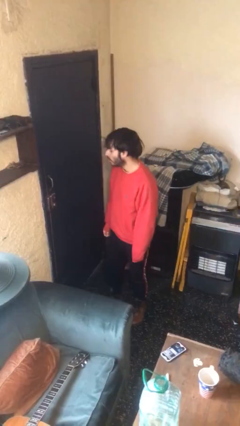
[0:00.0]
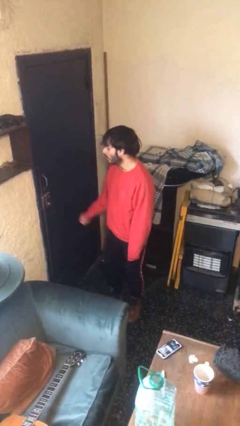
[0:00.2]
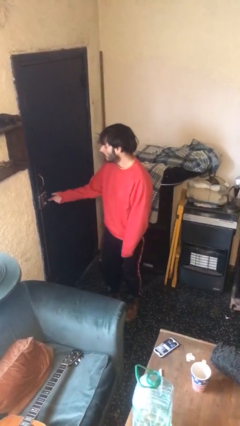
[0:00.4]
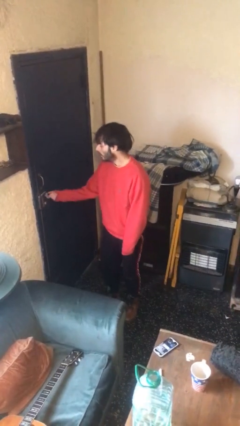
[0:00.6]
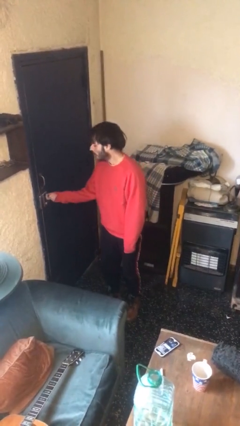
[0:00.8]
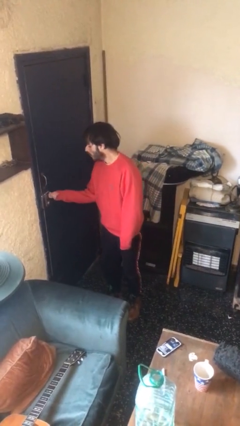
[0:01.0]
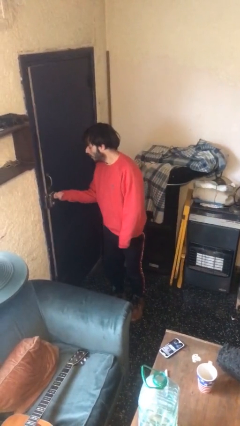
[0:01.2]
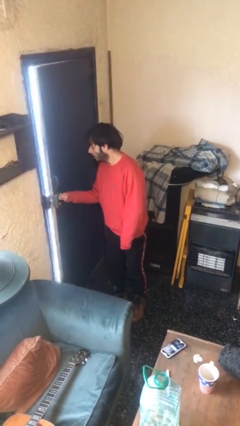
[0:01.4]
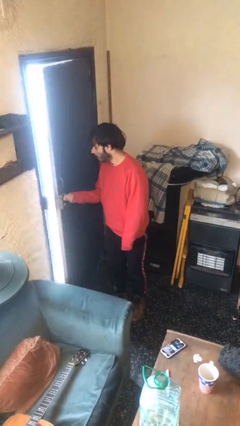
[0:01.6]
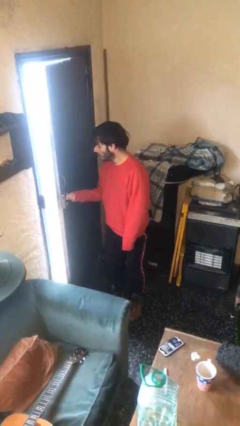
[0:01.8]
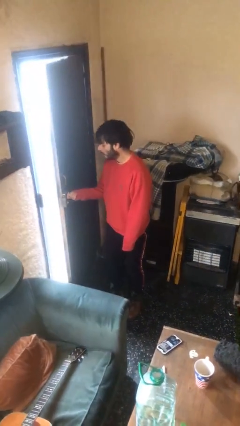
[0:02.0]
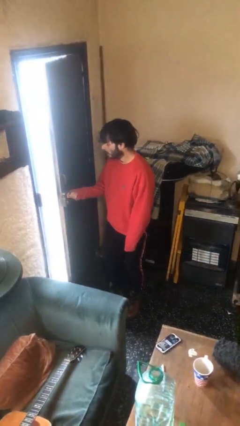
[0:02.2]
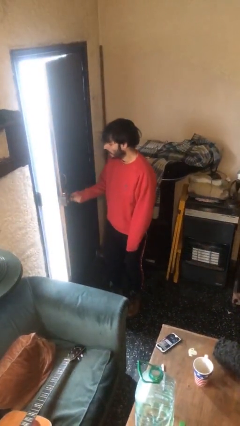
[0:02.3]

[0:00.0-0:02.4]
person opens facility door

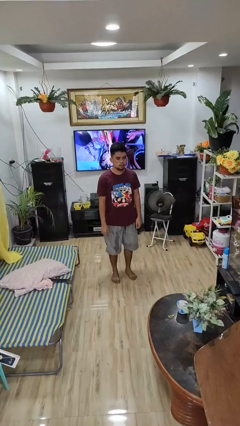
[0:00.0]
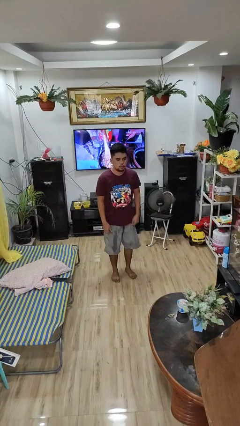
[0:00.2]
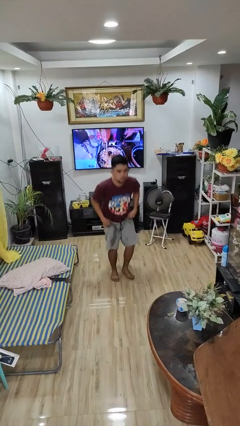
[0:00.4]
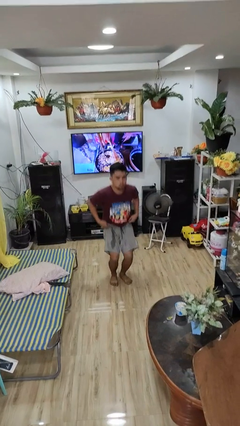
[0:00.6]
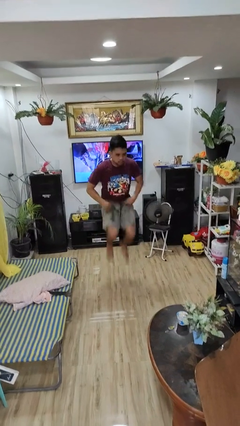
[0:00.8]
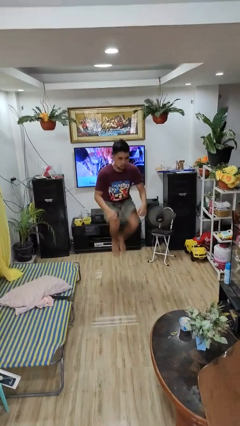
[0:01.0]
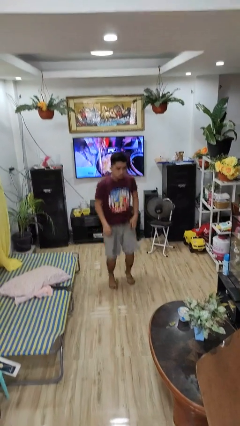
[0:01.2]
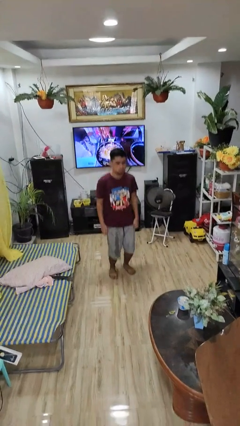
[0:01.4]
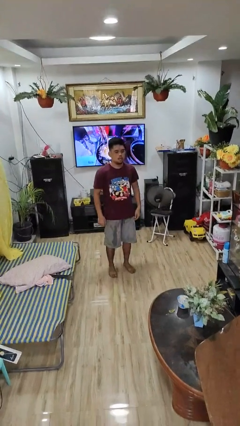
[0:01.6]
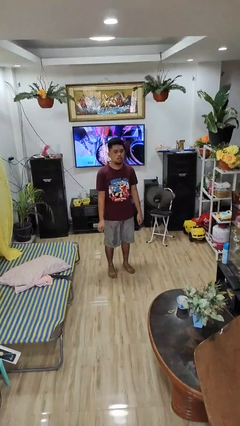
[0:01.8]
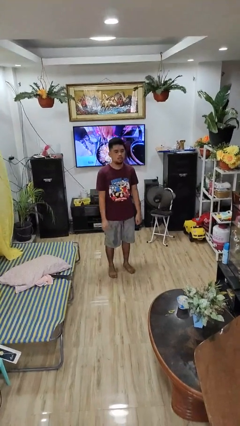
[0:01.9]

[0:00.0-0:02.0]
person jumps

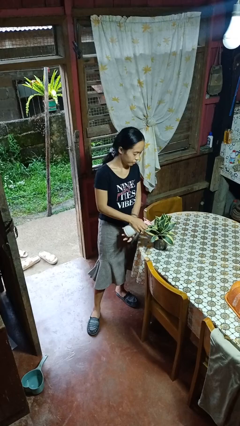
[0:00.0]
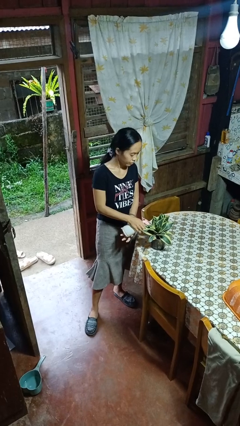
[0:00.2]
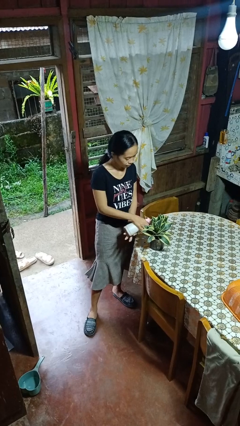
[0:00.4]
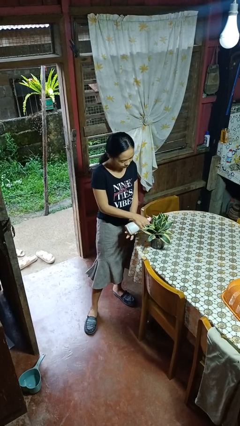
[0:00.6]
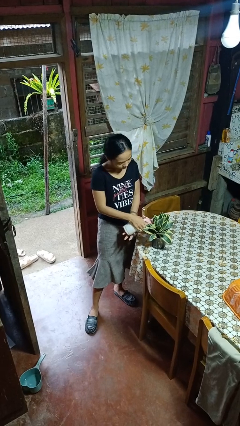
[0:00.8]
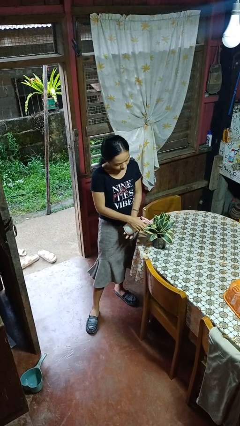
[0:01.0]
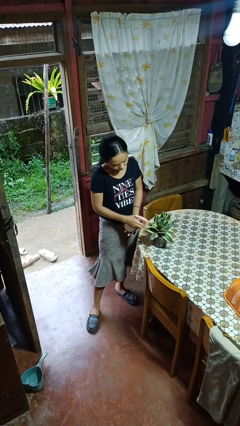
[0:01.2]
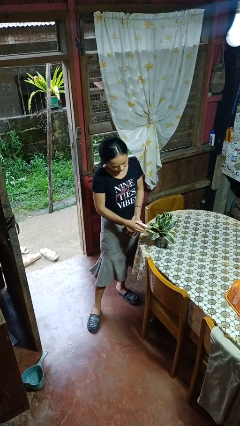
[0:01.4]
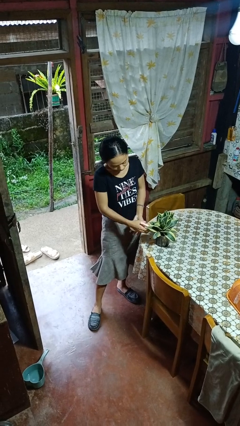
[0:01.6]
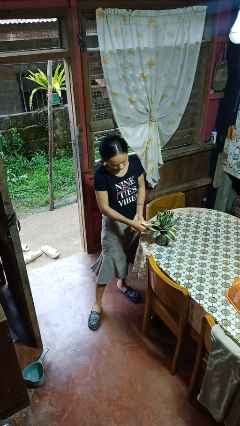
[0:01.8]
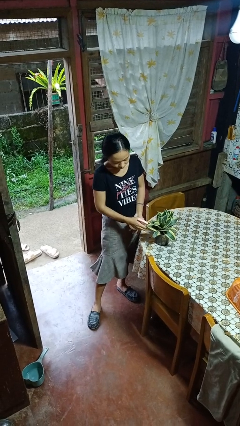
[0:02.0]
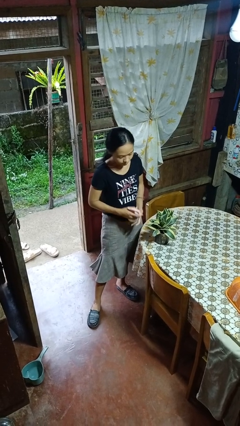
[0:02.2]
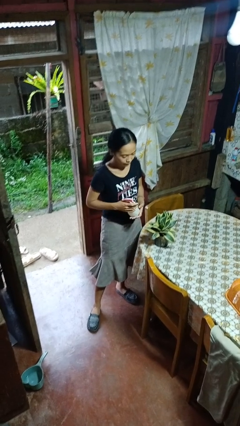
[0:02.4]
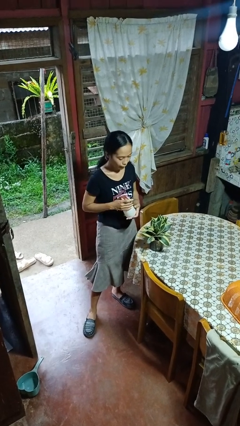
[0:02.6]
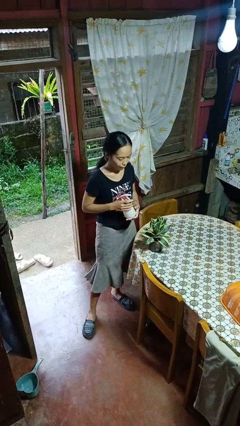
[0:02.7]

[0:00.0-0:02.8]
person waters houseplant

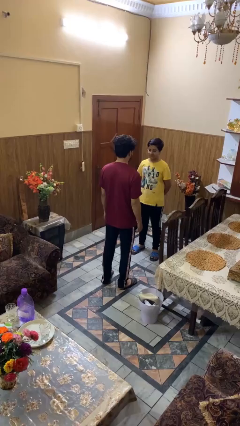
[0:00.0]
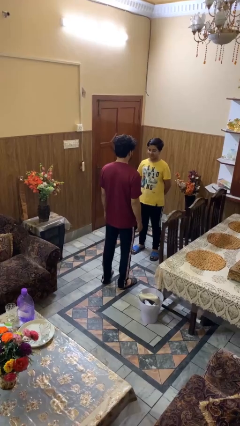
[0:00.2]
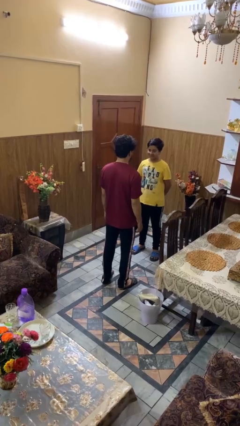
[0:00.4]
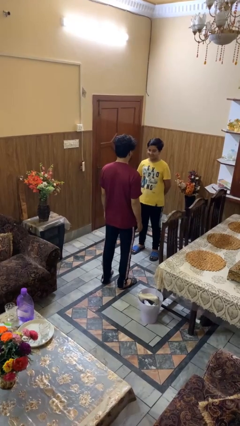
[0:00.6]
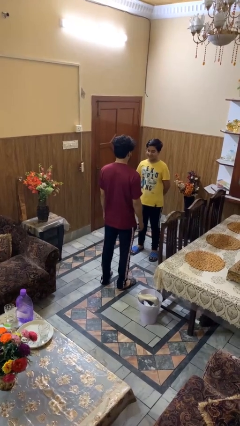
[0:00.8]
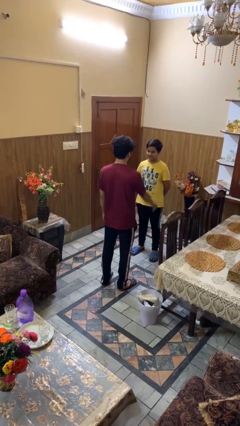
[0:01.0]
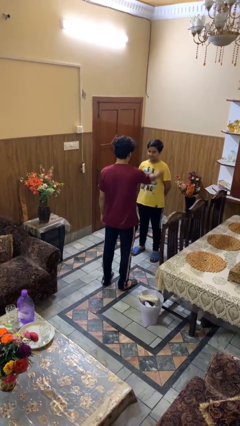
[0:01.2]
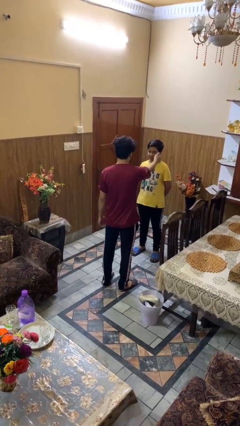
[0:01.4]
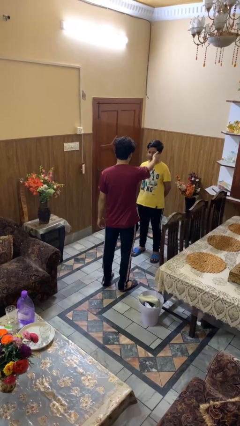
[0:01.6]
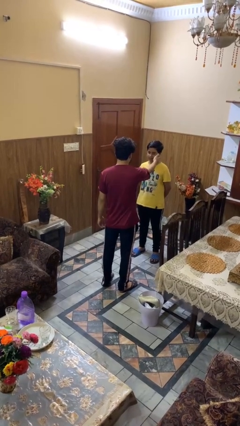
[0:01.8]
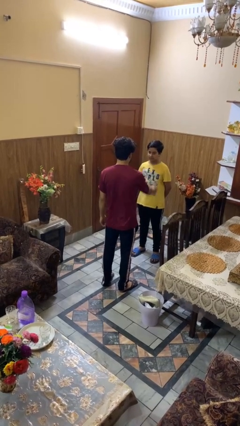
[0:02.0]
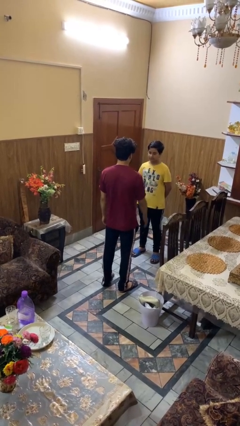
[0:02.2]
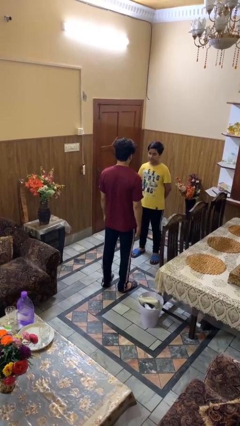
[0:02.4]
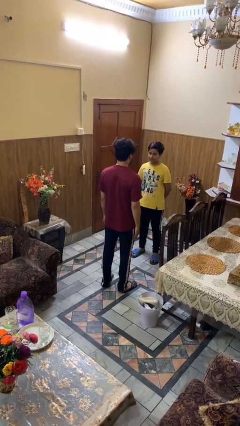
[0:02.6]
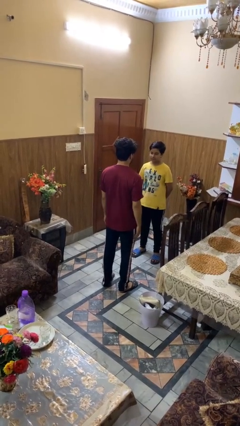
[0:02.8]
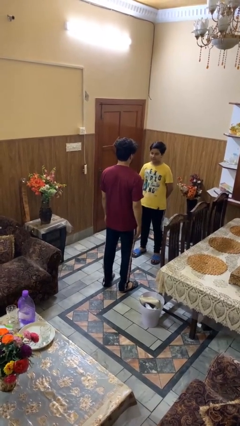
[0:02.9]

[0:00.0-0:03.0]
person touches face of person

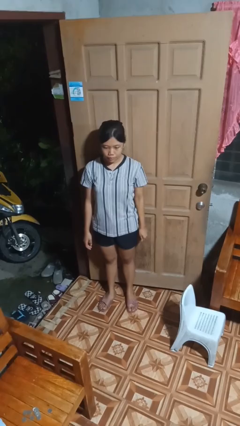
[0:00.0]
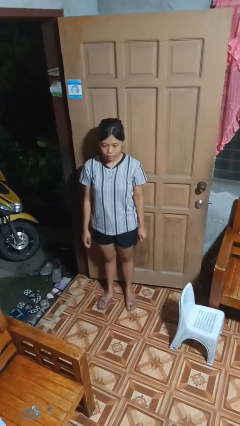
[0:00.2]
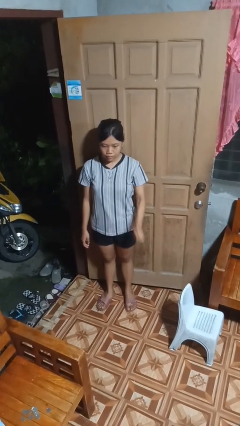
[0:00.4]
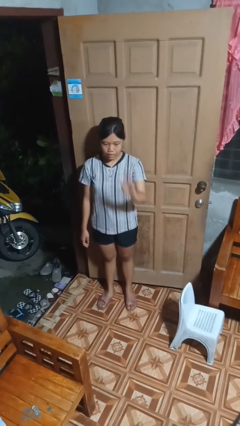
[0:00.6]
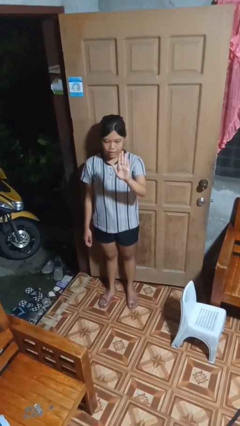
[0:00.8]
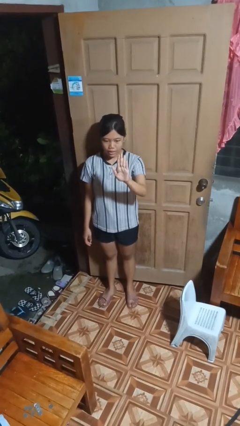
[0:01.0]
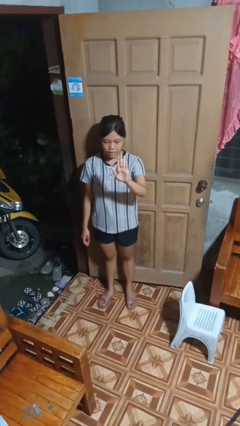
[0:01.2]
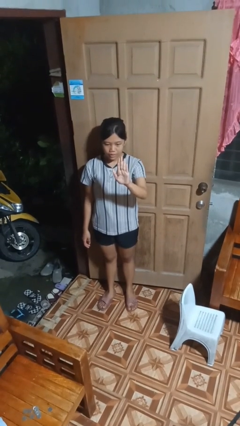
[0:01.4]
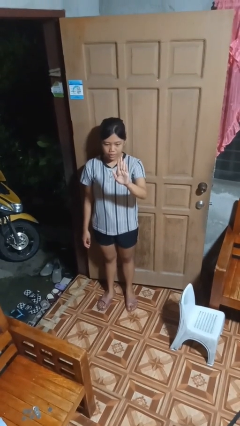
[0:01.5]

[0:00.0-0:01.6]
person gestures number five

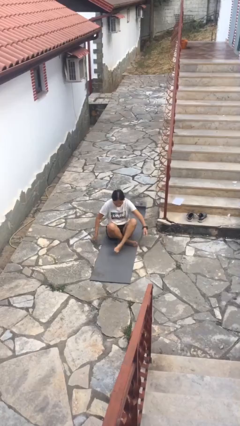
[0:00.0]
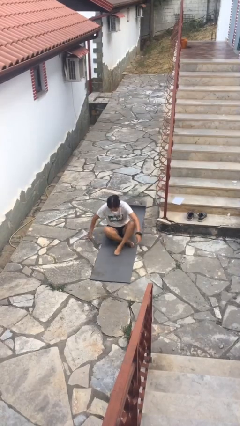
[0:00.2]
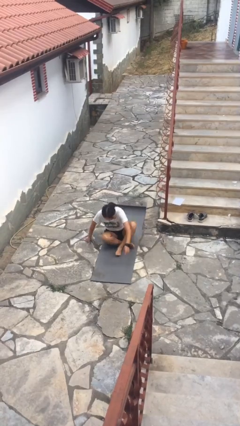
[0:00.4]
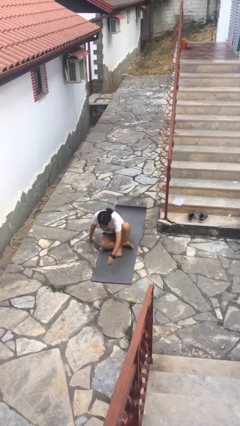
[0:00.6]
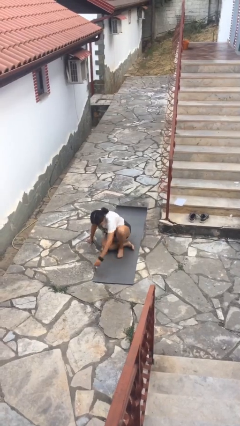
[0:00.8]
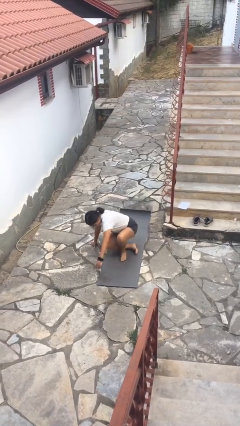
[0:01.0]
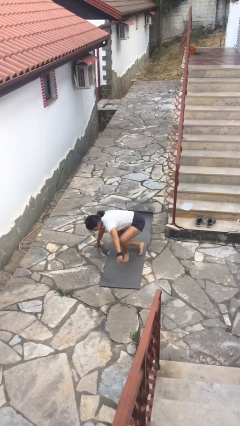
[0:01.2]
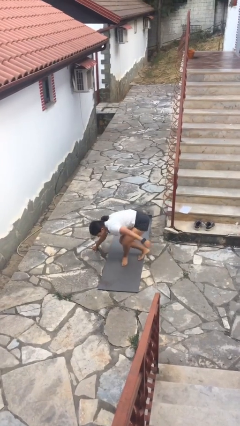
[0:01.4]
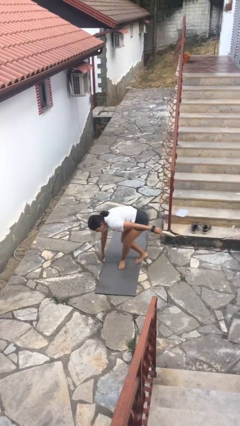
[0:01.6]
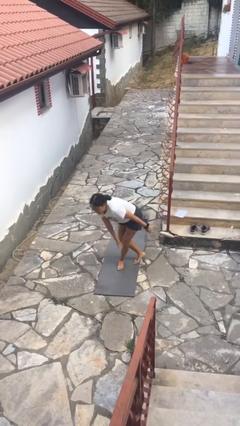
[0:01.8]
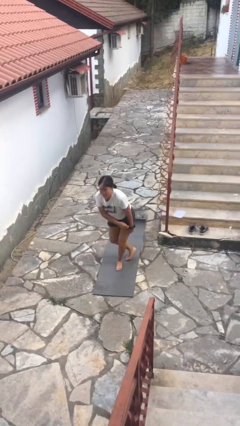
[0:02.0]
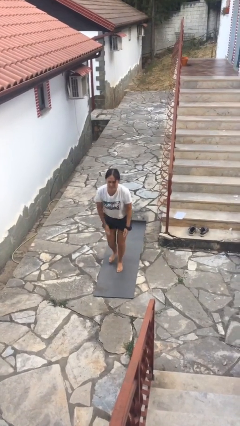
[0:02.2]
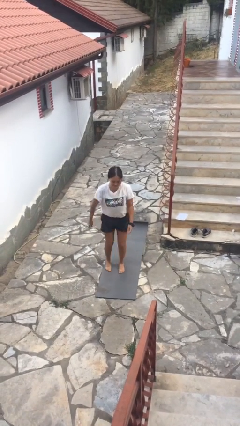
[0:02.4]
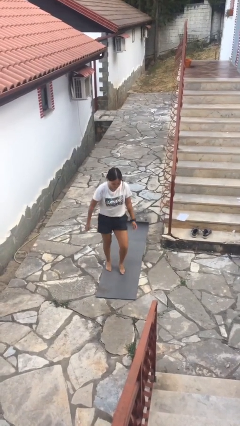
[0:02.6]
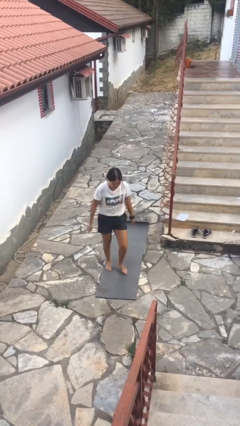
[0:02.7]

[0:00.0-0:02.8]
person stands up from floor

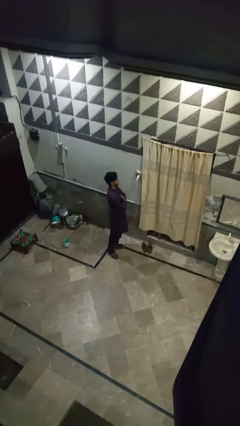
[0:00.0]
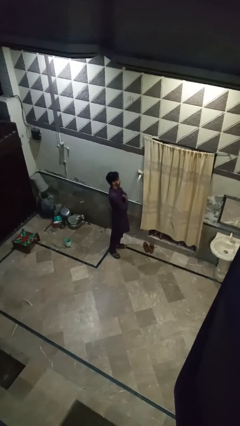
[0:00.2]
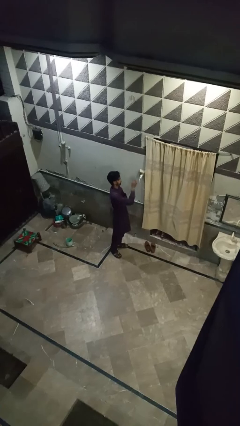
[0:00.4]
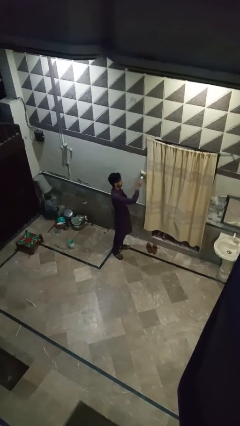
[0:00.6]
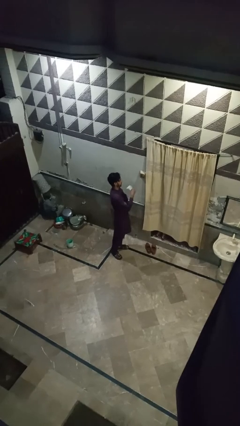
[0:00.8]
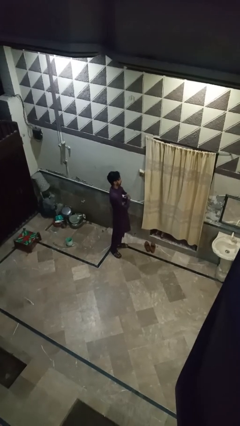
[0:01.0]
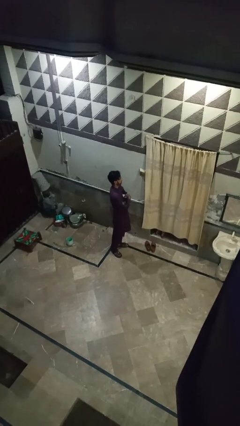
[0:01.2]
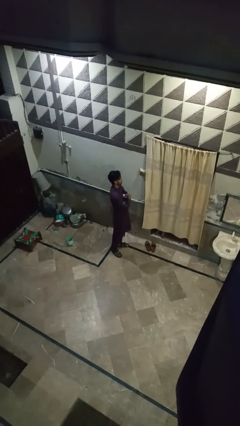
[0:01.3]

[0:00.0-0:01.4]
person unplugs from electrical socket

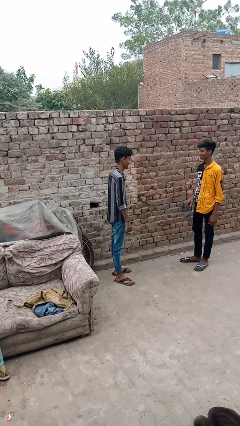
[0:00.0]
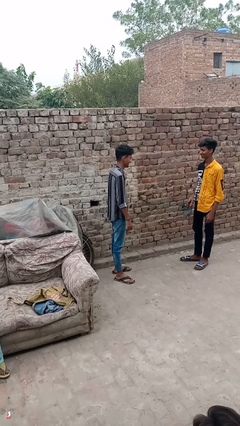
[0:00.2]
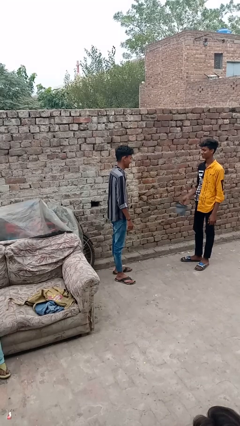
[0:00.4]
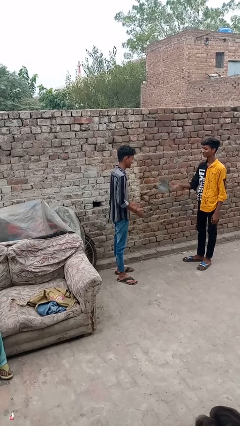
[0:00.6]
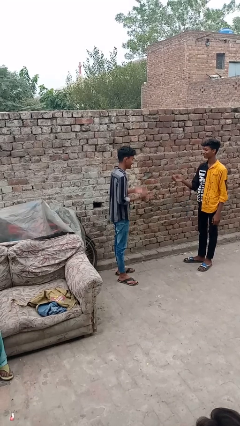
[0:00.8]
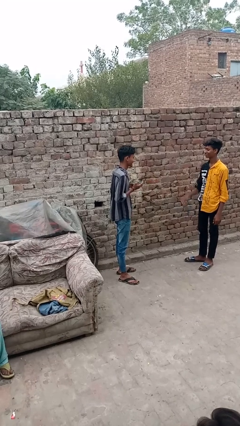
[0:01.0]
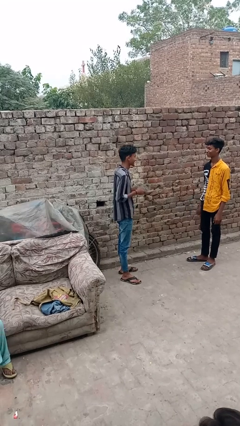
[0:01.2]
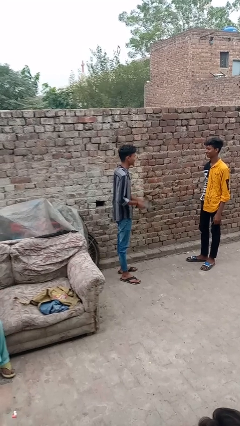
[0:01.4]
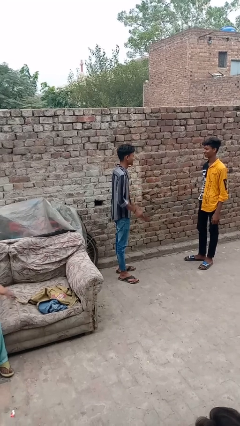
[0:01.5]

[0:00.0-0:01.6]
person catches object from person
